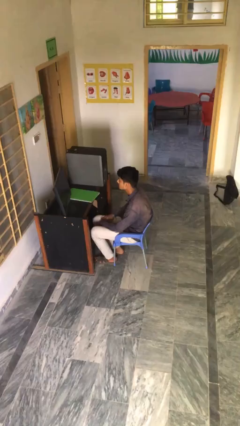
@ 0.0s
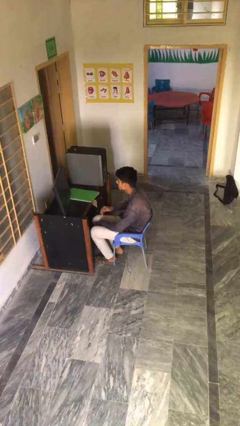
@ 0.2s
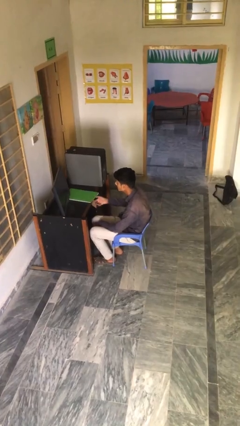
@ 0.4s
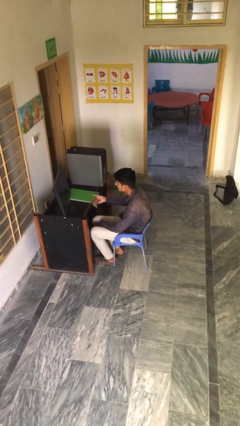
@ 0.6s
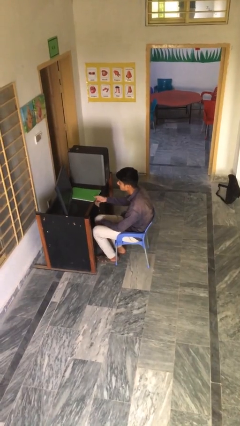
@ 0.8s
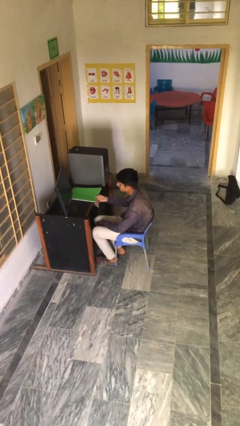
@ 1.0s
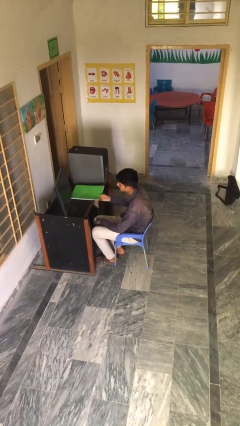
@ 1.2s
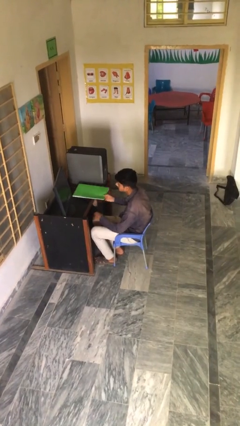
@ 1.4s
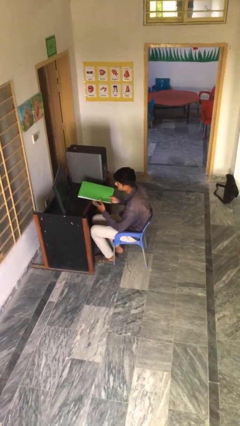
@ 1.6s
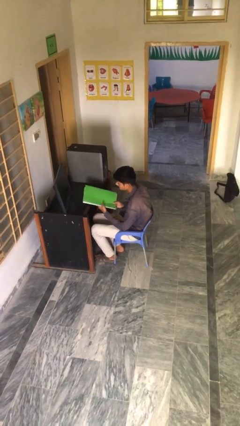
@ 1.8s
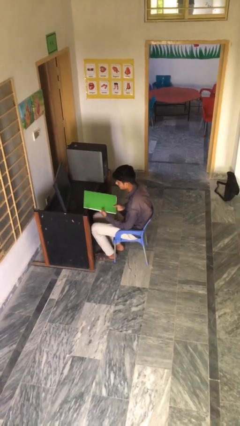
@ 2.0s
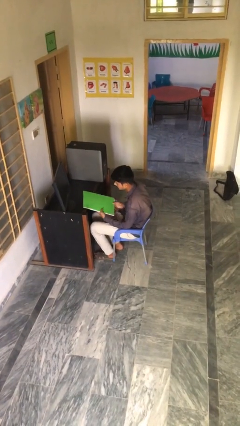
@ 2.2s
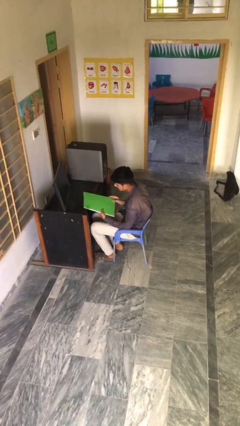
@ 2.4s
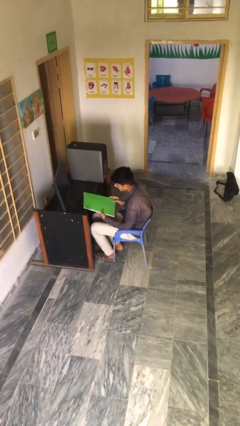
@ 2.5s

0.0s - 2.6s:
person picks up object from table

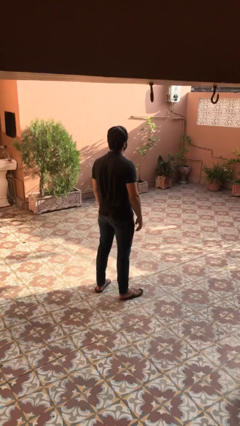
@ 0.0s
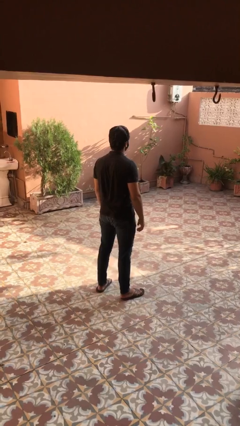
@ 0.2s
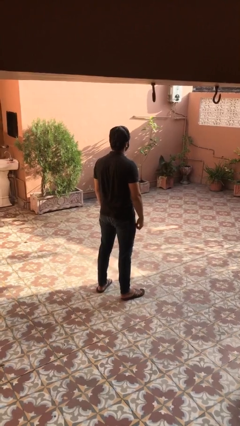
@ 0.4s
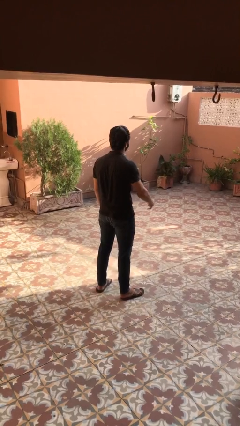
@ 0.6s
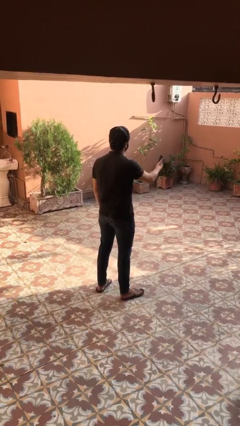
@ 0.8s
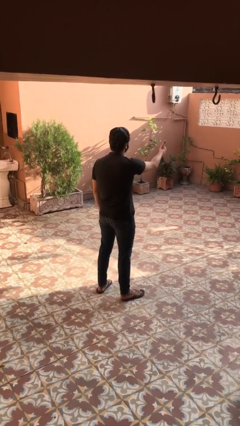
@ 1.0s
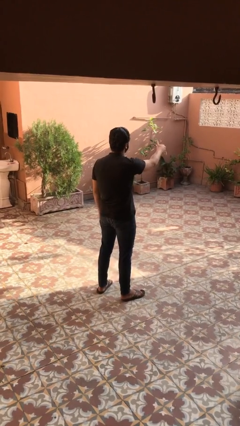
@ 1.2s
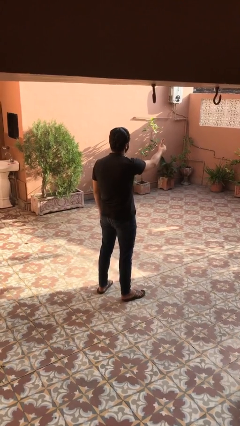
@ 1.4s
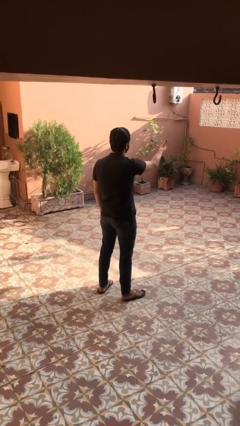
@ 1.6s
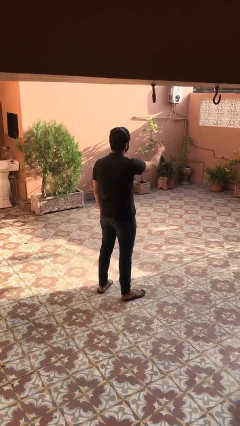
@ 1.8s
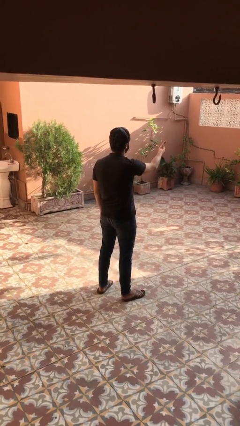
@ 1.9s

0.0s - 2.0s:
person gestures hang loose

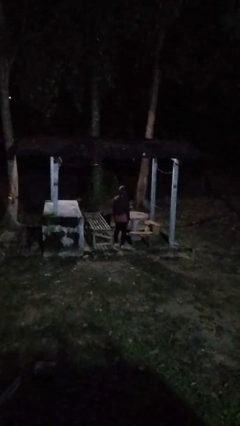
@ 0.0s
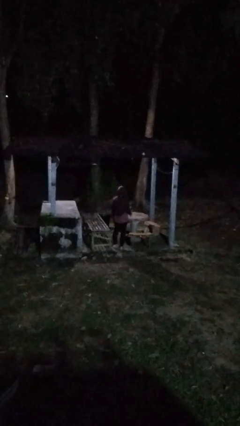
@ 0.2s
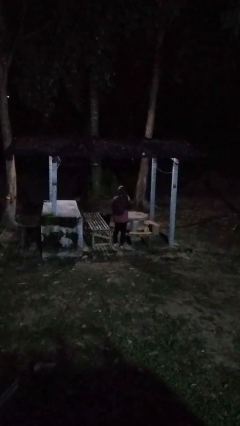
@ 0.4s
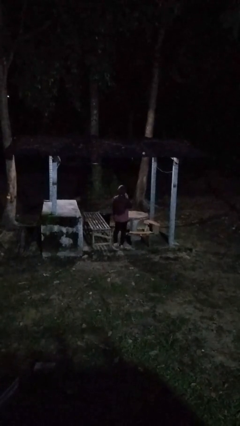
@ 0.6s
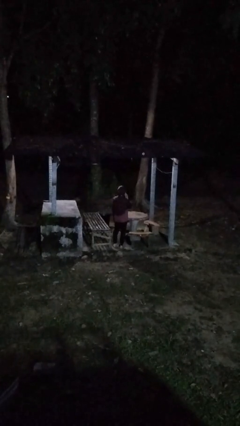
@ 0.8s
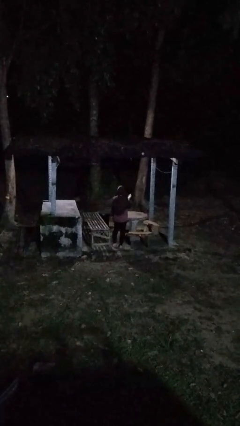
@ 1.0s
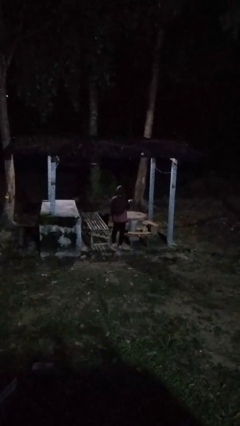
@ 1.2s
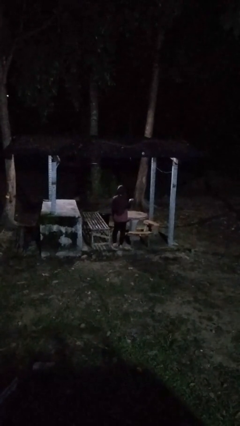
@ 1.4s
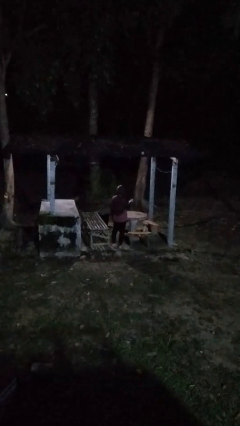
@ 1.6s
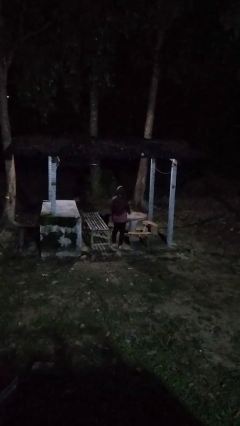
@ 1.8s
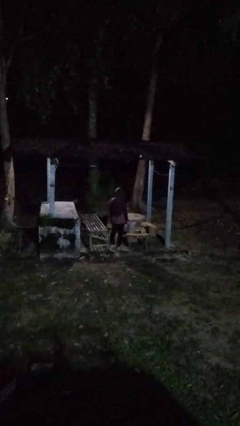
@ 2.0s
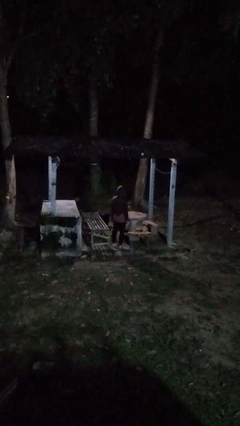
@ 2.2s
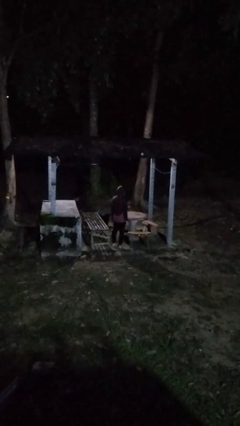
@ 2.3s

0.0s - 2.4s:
person gestures blow kiss

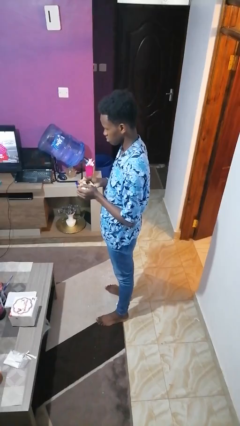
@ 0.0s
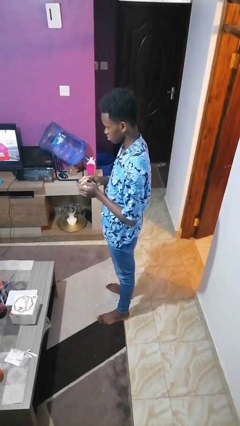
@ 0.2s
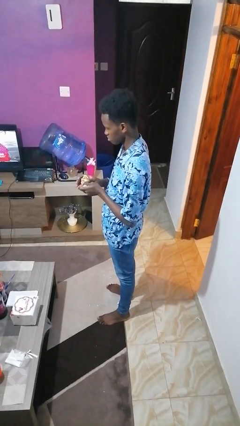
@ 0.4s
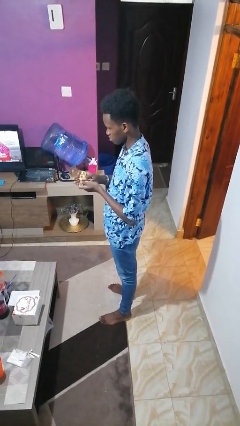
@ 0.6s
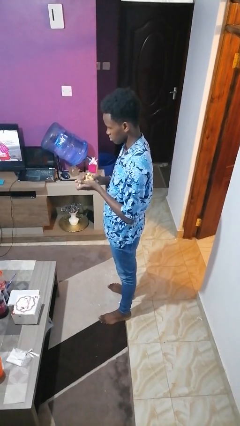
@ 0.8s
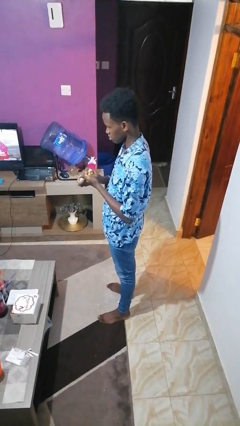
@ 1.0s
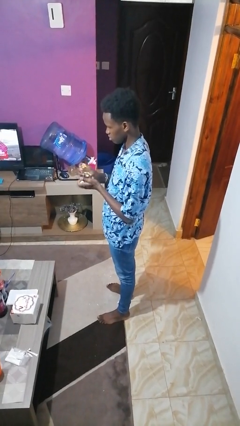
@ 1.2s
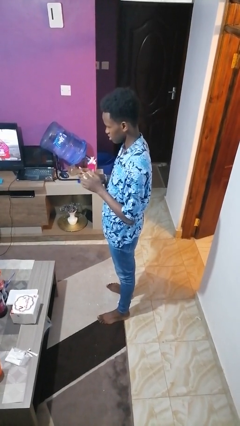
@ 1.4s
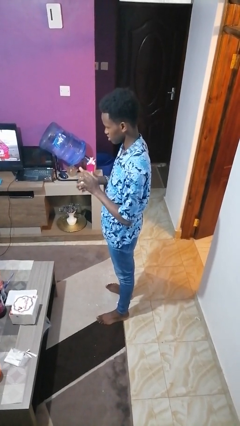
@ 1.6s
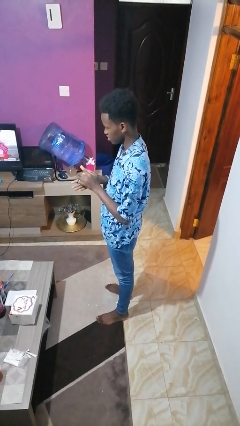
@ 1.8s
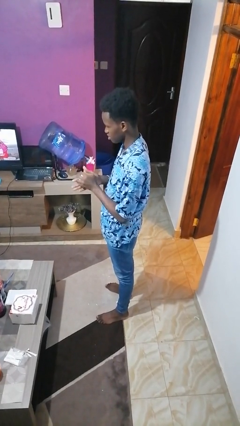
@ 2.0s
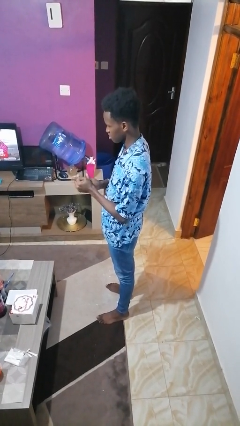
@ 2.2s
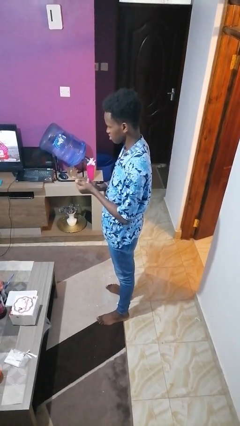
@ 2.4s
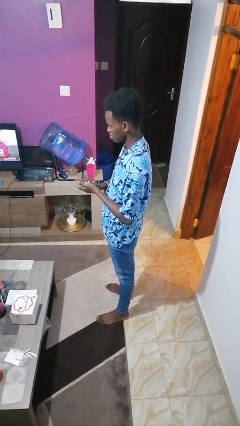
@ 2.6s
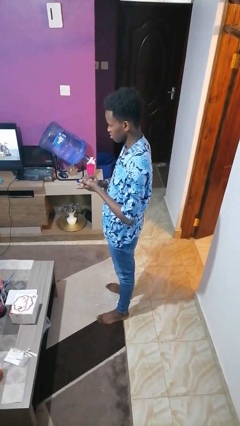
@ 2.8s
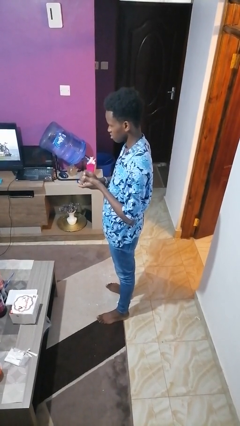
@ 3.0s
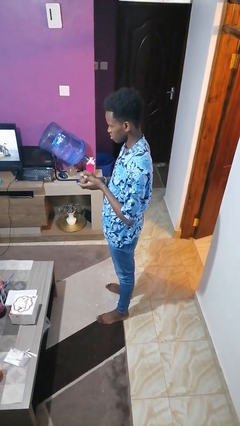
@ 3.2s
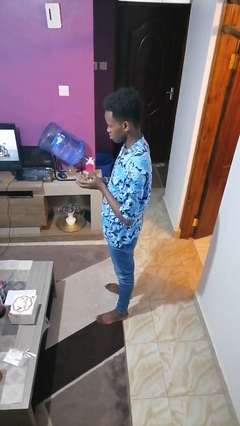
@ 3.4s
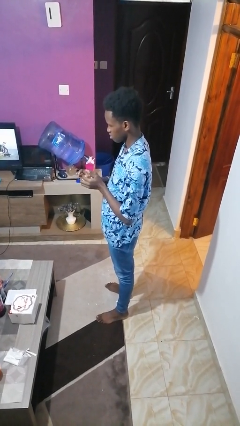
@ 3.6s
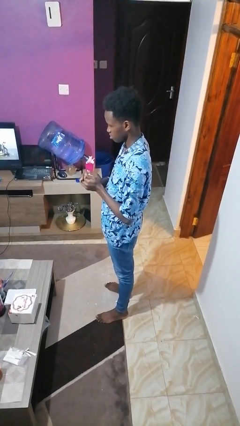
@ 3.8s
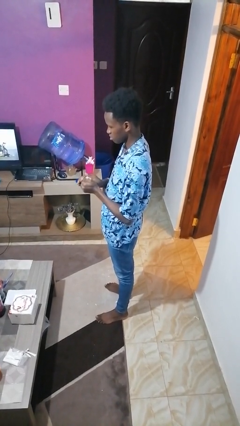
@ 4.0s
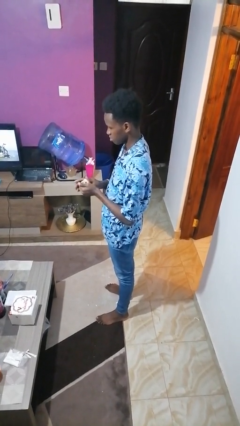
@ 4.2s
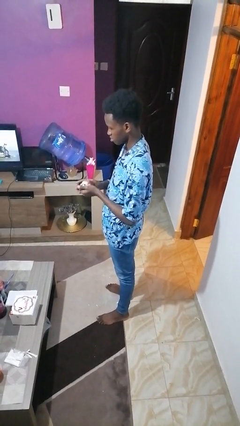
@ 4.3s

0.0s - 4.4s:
person crumples paper

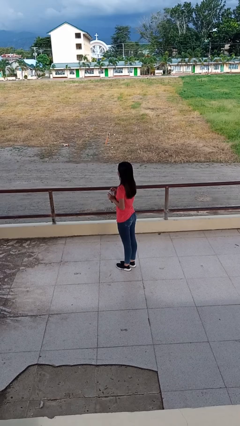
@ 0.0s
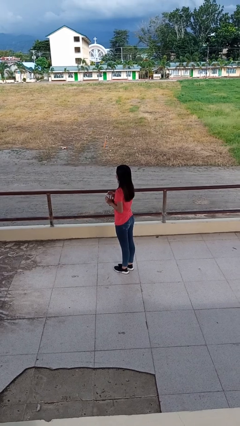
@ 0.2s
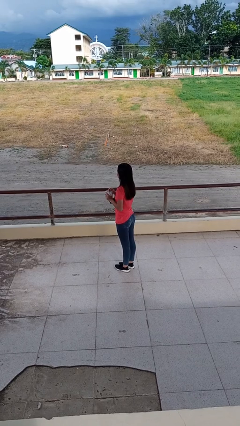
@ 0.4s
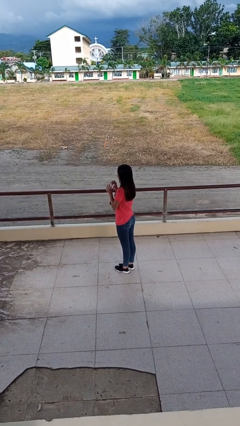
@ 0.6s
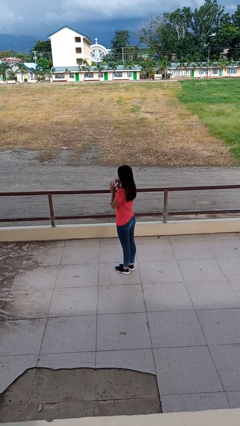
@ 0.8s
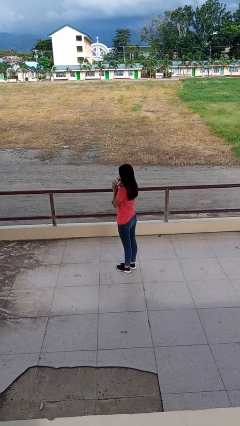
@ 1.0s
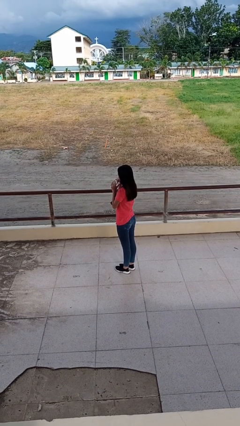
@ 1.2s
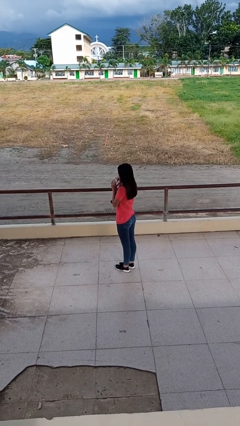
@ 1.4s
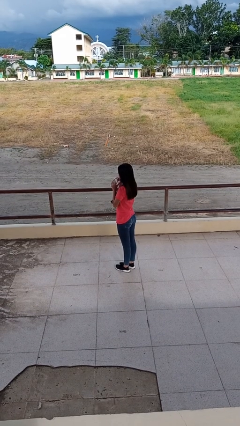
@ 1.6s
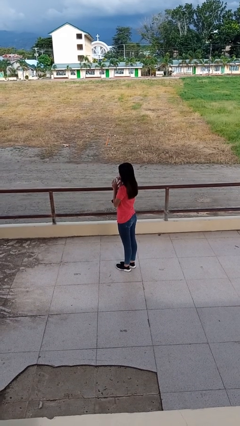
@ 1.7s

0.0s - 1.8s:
person drinks from straw

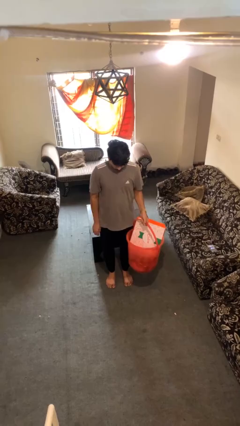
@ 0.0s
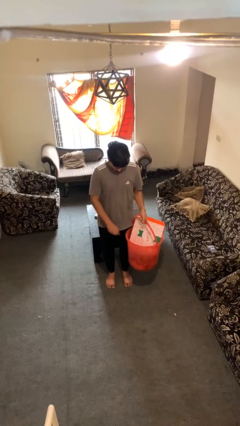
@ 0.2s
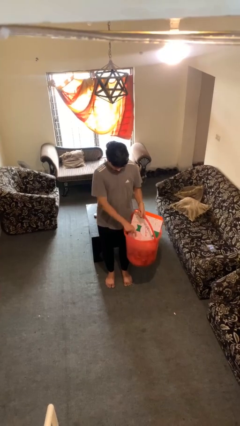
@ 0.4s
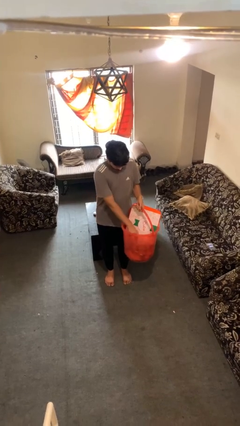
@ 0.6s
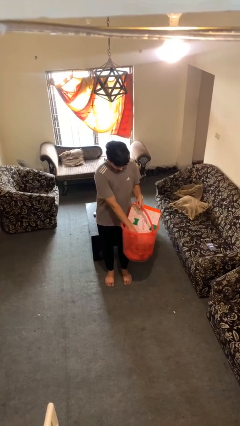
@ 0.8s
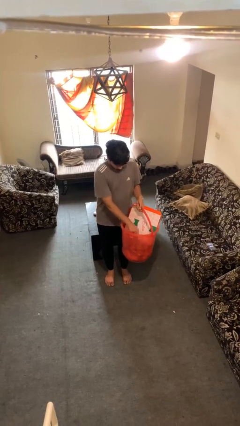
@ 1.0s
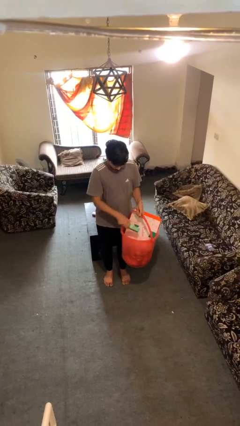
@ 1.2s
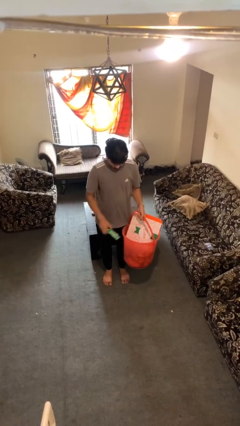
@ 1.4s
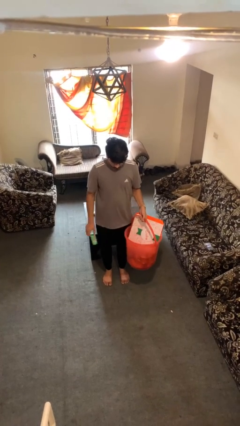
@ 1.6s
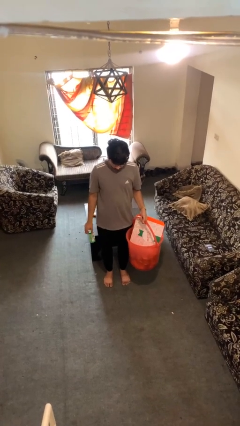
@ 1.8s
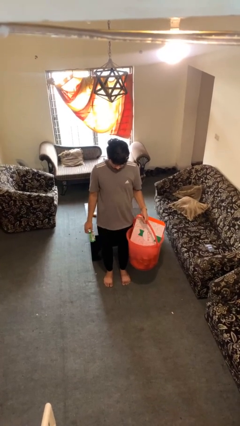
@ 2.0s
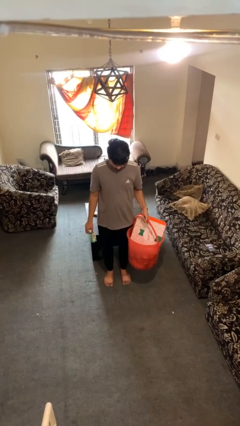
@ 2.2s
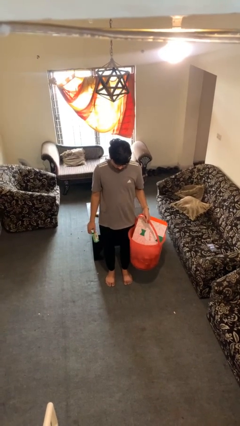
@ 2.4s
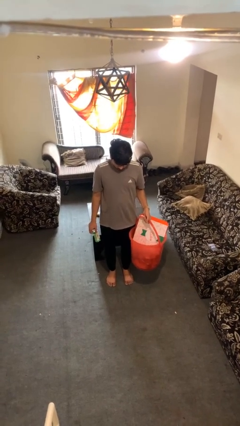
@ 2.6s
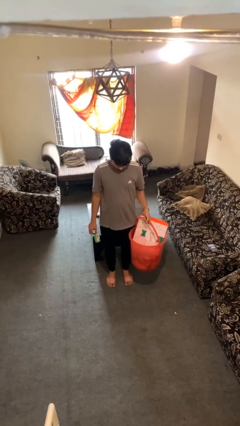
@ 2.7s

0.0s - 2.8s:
person takes object from basket

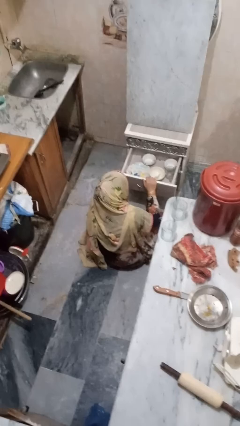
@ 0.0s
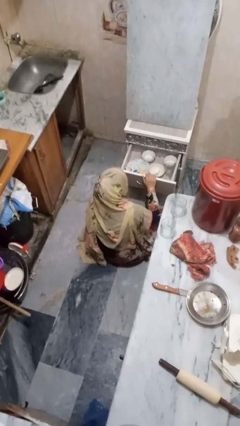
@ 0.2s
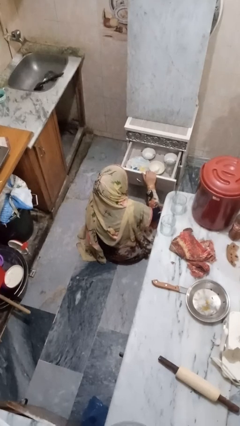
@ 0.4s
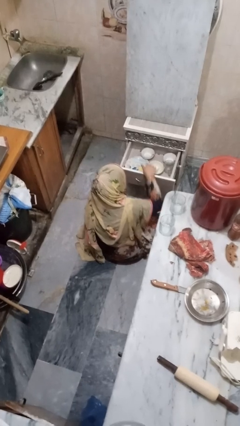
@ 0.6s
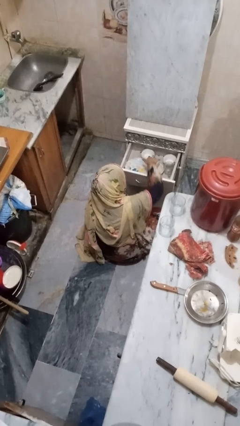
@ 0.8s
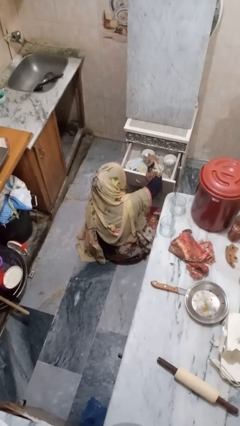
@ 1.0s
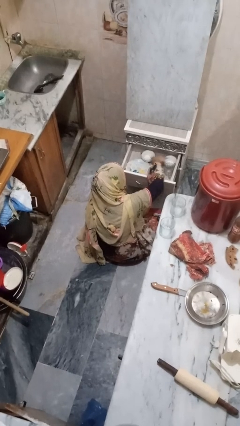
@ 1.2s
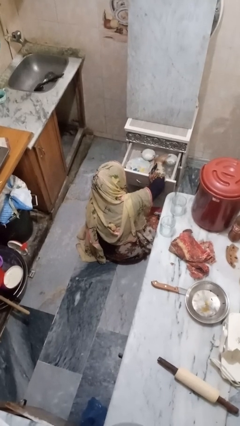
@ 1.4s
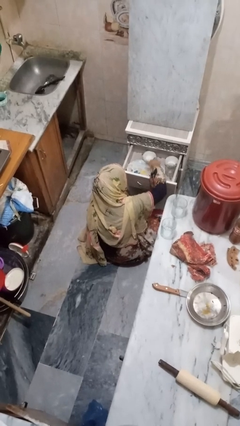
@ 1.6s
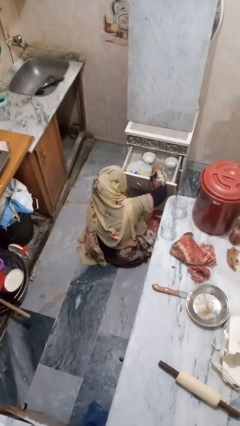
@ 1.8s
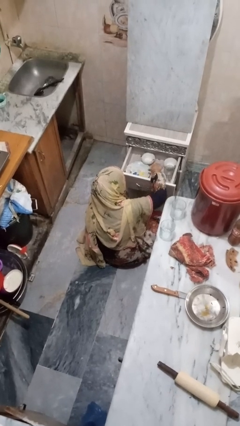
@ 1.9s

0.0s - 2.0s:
person searches in kitchen drawer
